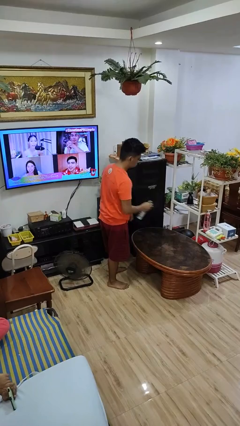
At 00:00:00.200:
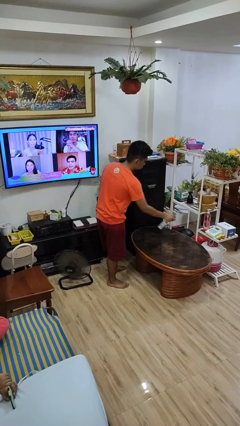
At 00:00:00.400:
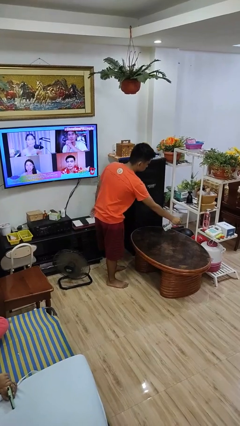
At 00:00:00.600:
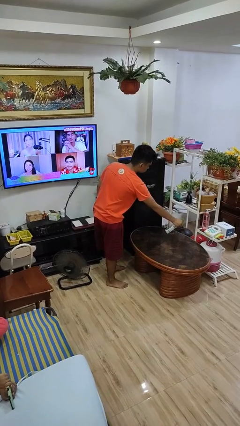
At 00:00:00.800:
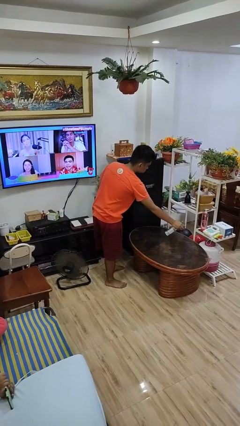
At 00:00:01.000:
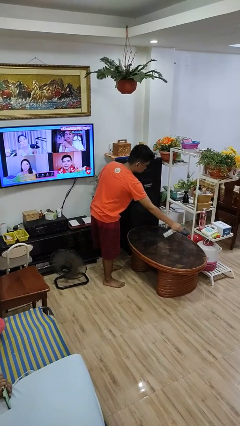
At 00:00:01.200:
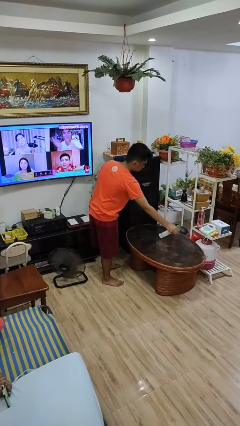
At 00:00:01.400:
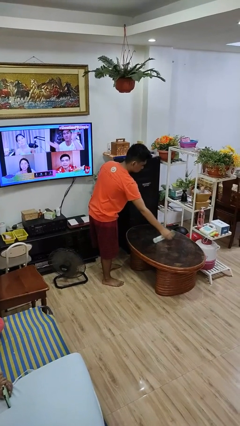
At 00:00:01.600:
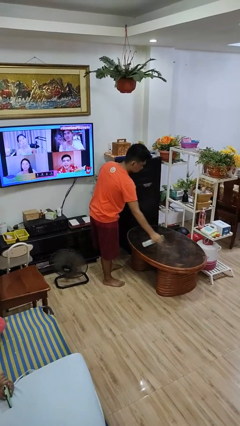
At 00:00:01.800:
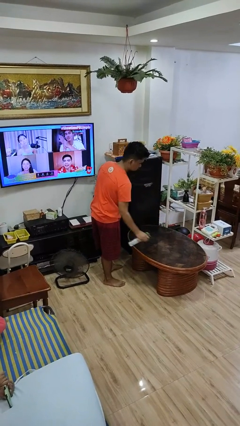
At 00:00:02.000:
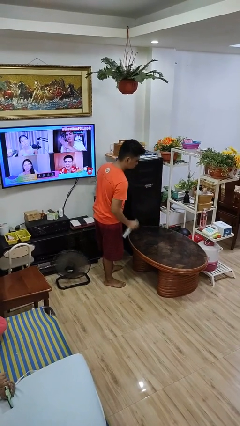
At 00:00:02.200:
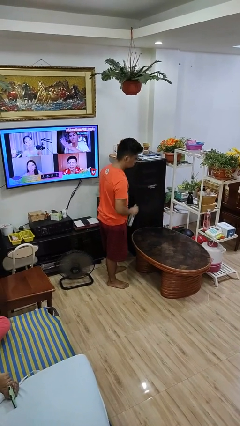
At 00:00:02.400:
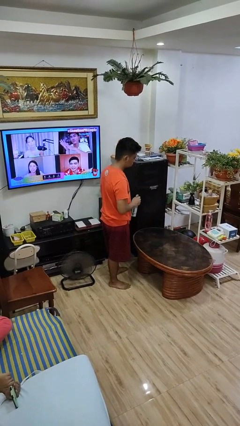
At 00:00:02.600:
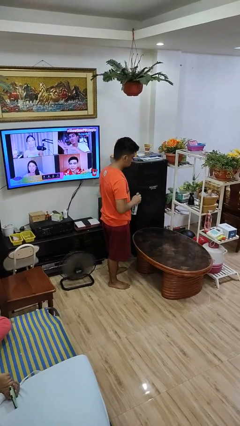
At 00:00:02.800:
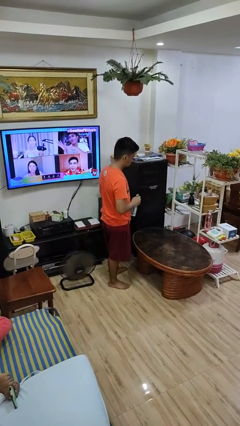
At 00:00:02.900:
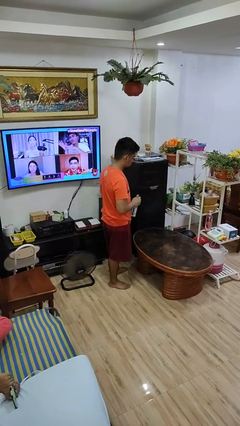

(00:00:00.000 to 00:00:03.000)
person sprays from bottle

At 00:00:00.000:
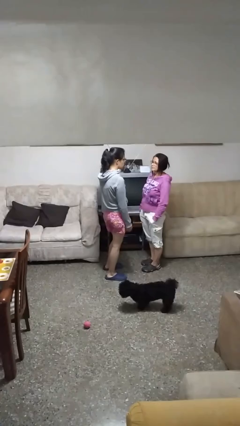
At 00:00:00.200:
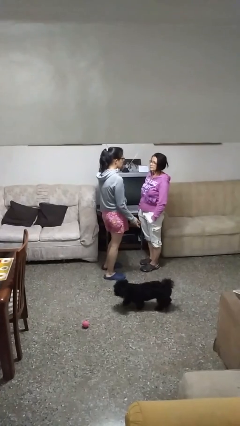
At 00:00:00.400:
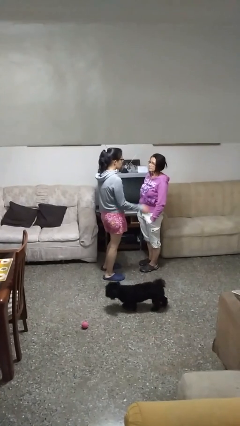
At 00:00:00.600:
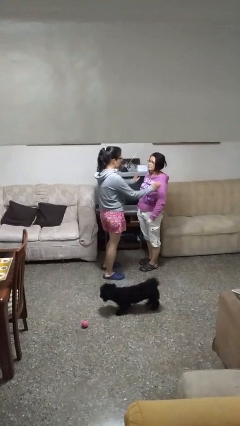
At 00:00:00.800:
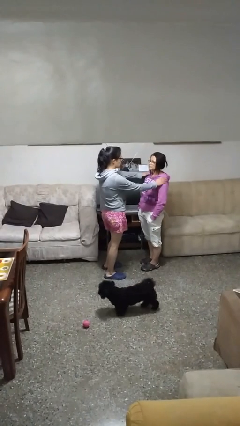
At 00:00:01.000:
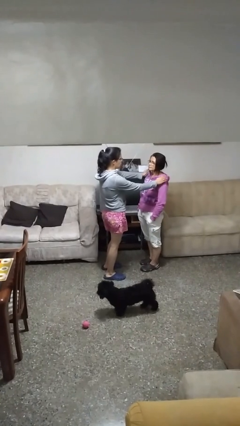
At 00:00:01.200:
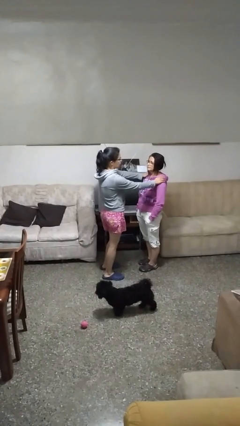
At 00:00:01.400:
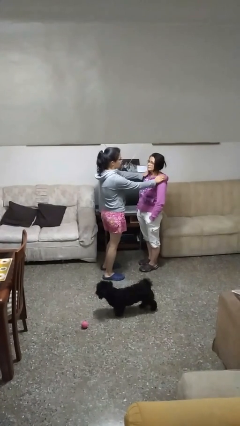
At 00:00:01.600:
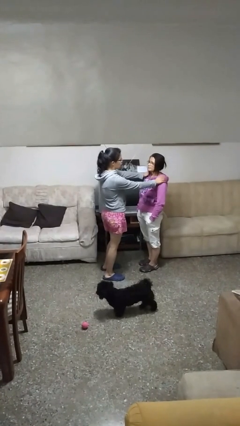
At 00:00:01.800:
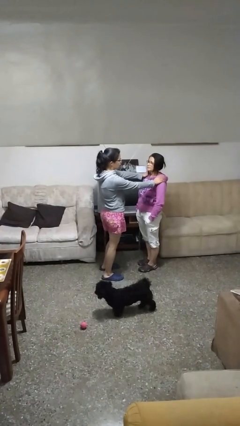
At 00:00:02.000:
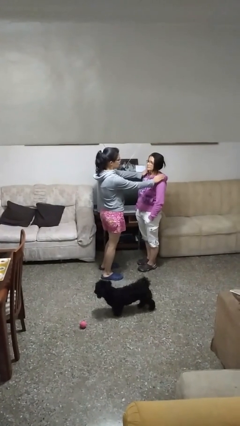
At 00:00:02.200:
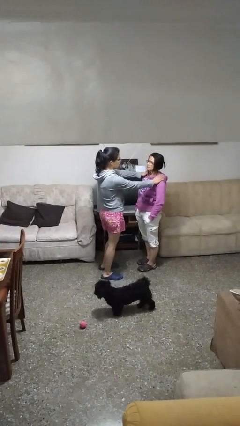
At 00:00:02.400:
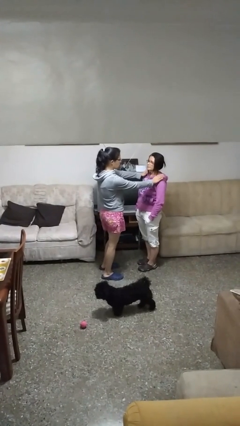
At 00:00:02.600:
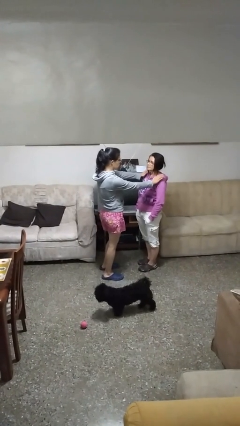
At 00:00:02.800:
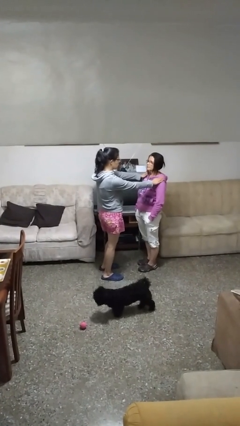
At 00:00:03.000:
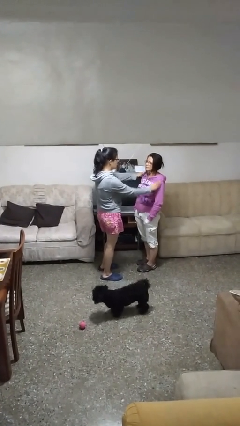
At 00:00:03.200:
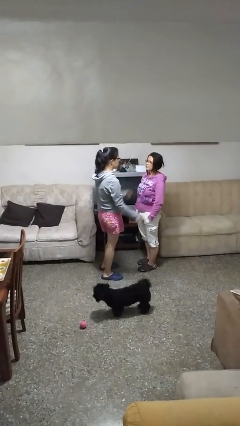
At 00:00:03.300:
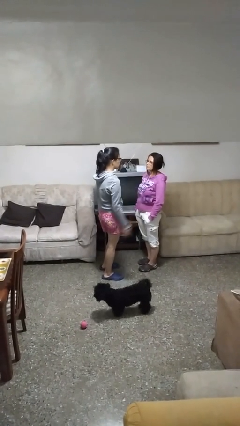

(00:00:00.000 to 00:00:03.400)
person pounds shoulders of person

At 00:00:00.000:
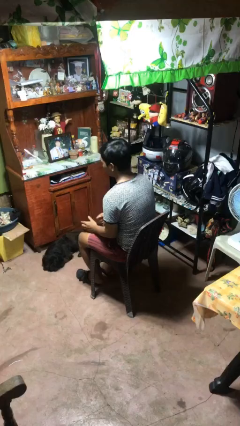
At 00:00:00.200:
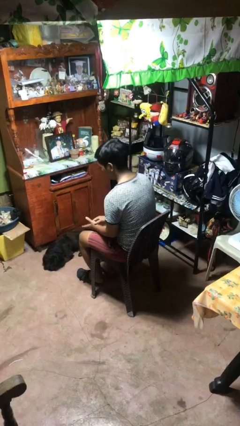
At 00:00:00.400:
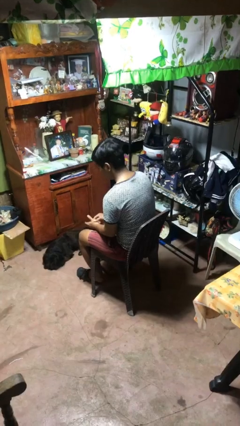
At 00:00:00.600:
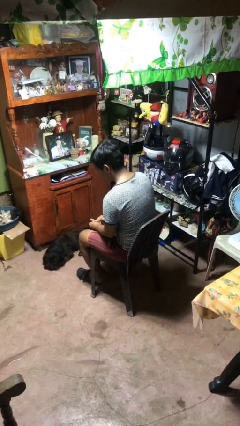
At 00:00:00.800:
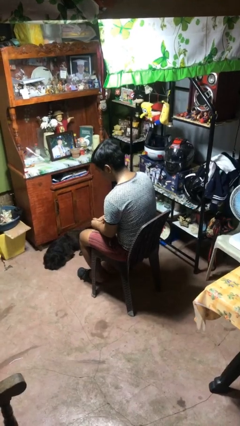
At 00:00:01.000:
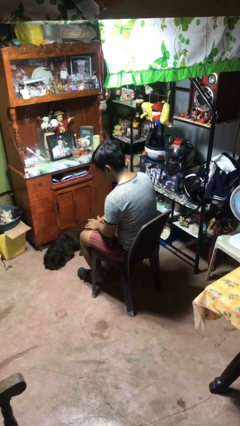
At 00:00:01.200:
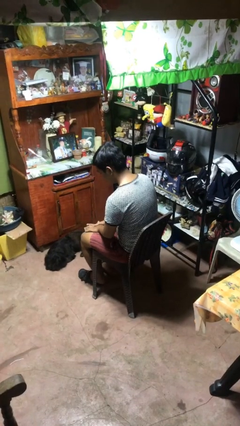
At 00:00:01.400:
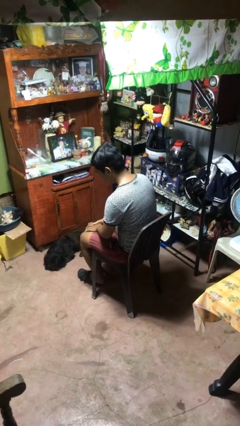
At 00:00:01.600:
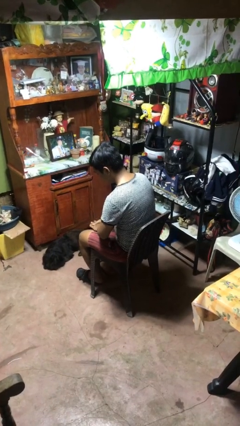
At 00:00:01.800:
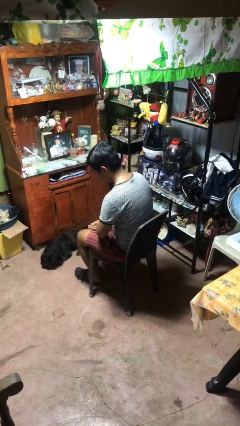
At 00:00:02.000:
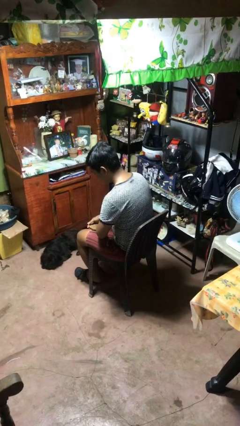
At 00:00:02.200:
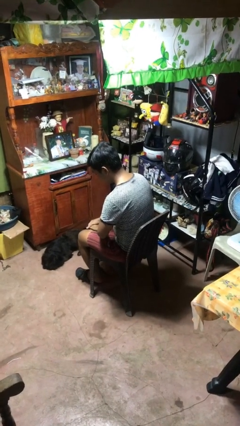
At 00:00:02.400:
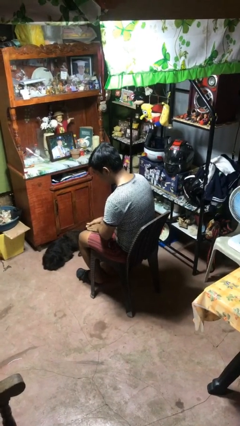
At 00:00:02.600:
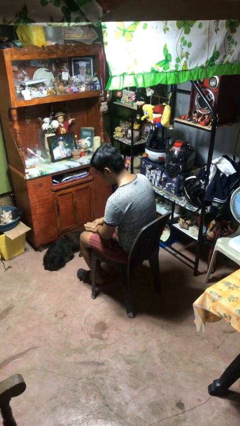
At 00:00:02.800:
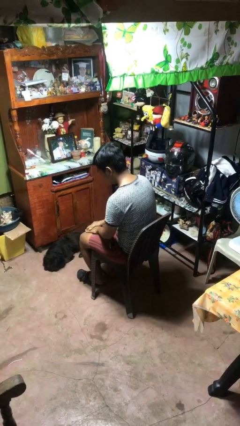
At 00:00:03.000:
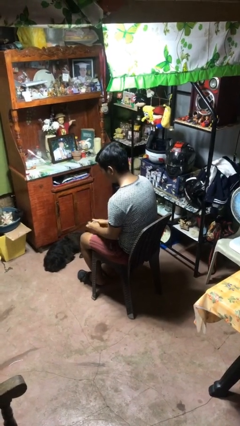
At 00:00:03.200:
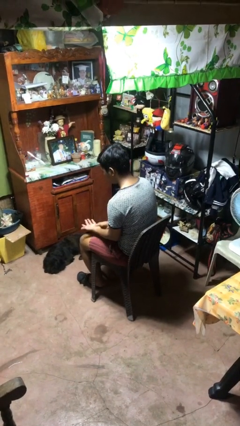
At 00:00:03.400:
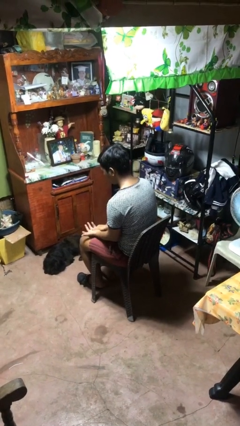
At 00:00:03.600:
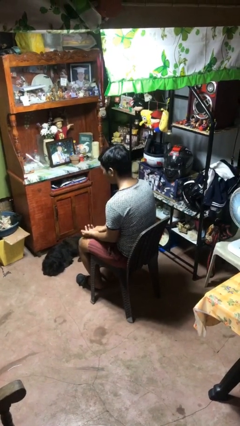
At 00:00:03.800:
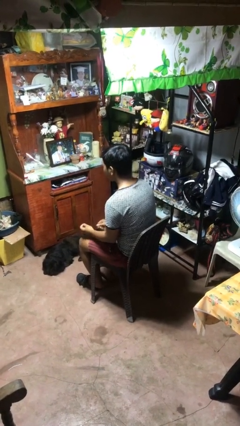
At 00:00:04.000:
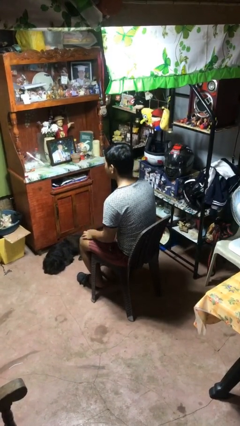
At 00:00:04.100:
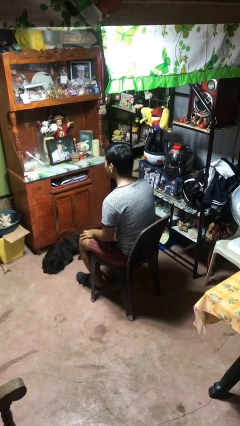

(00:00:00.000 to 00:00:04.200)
person looks at hands in lap

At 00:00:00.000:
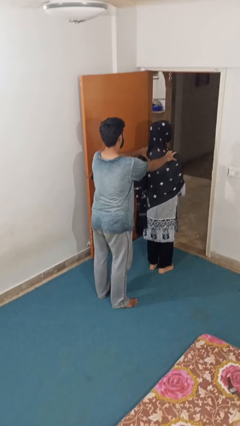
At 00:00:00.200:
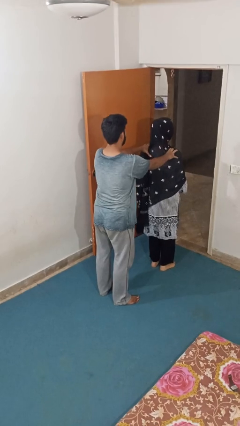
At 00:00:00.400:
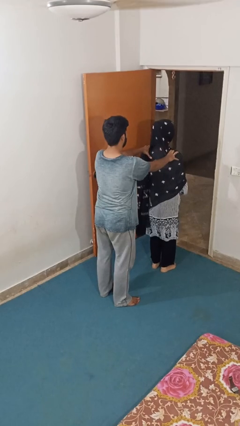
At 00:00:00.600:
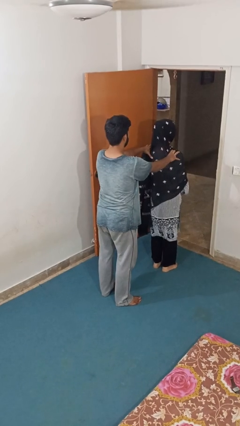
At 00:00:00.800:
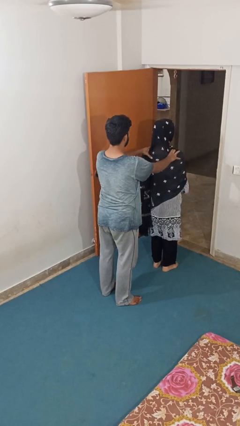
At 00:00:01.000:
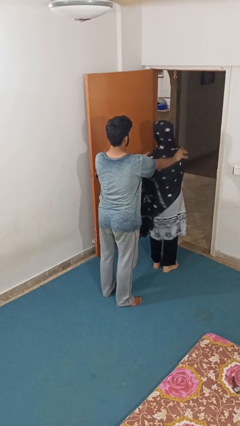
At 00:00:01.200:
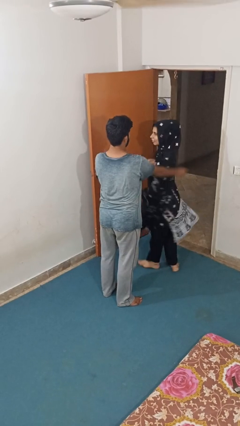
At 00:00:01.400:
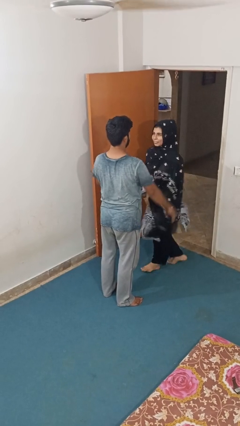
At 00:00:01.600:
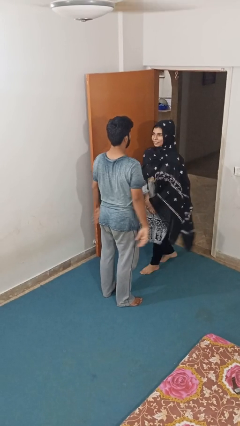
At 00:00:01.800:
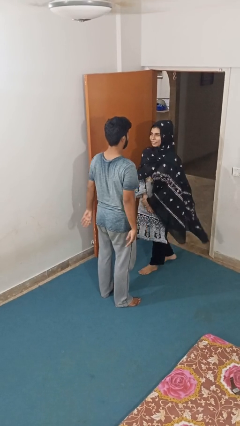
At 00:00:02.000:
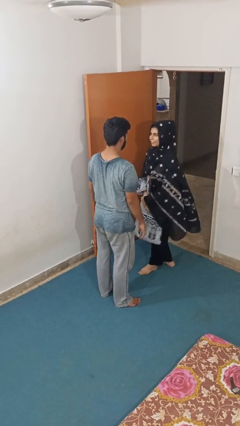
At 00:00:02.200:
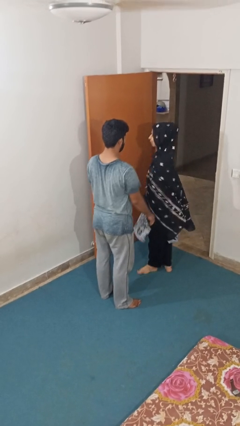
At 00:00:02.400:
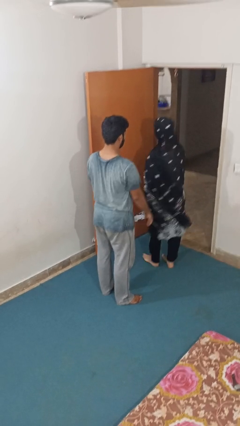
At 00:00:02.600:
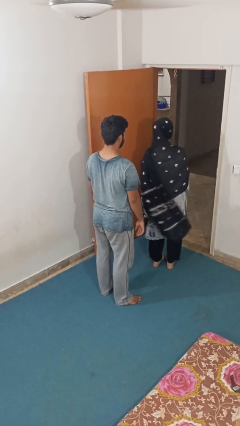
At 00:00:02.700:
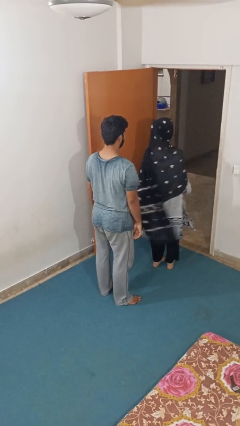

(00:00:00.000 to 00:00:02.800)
person spins person around

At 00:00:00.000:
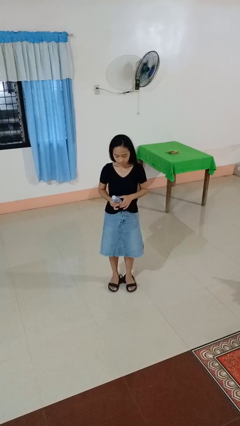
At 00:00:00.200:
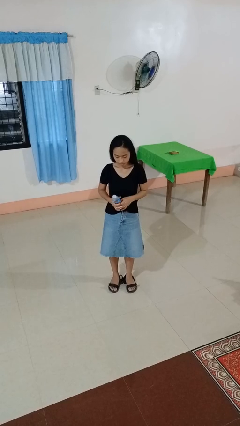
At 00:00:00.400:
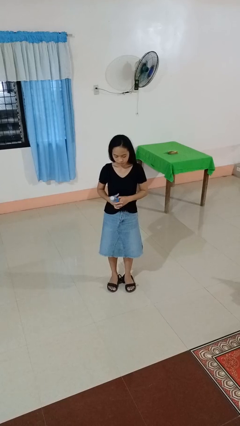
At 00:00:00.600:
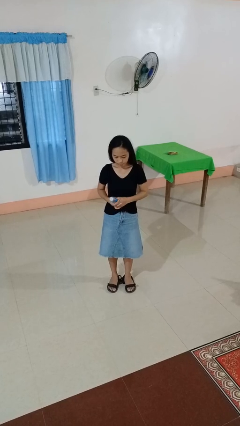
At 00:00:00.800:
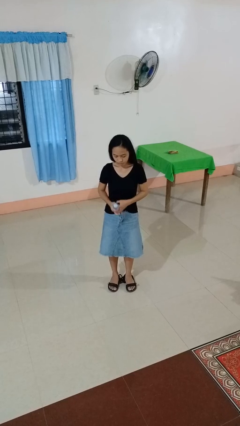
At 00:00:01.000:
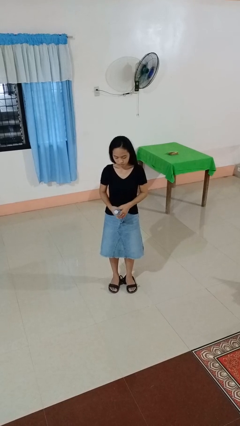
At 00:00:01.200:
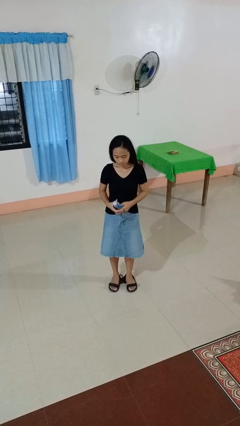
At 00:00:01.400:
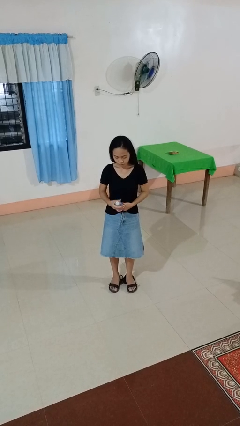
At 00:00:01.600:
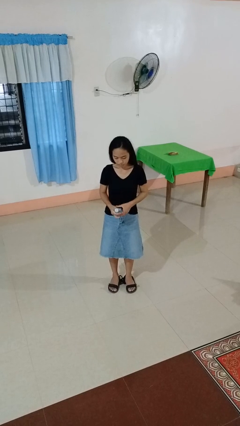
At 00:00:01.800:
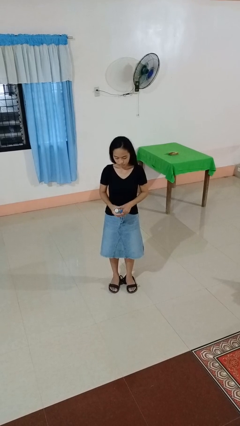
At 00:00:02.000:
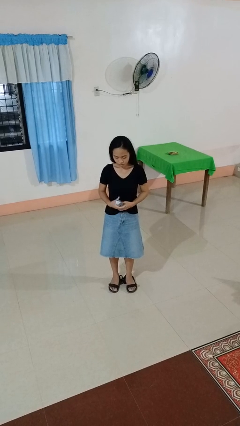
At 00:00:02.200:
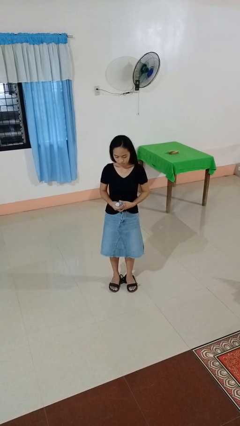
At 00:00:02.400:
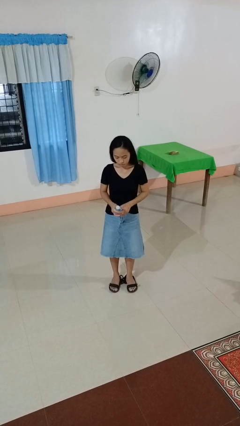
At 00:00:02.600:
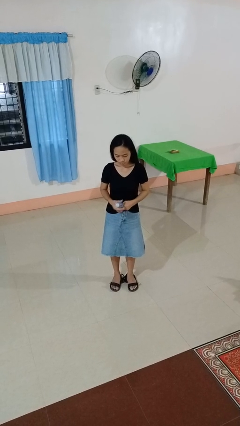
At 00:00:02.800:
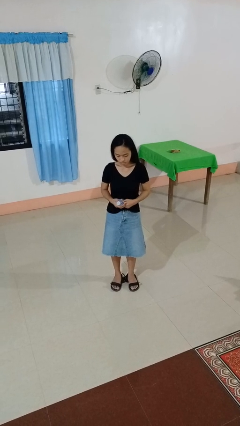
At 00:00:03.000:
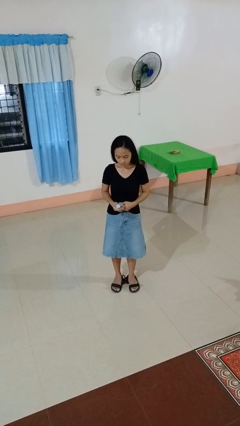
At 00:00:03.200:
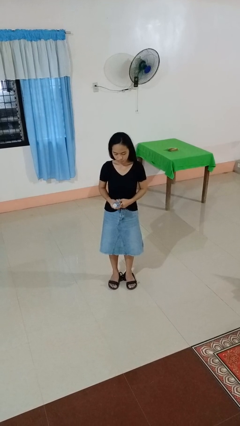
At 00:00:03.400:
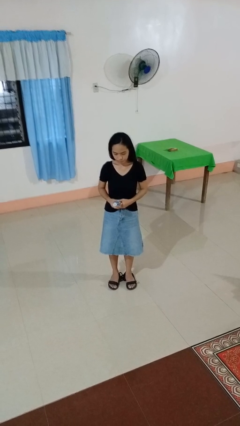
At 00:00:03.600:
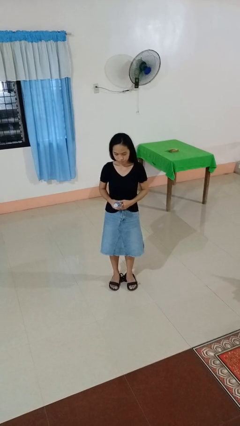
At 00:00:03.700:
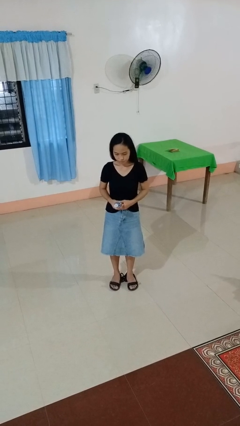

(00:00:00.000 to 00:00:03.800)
person squeezes object

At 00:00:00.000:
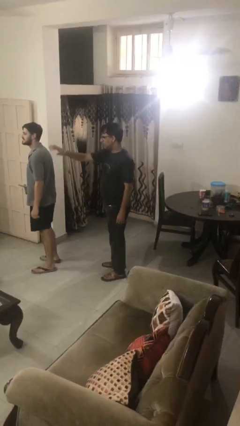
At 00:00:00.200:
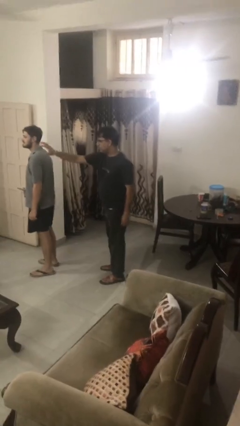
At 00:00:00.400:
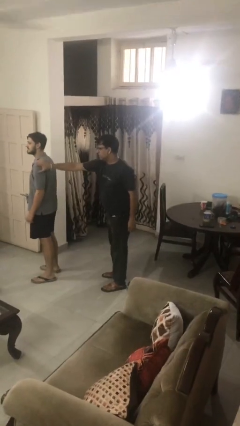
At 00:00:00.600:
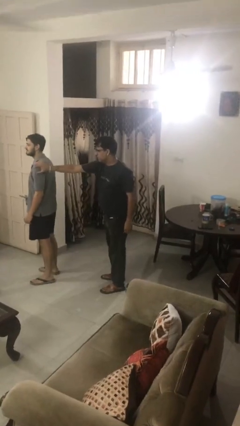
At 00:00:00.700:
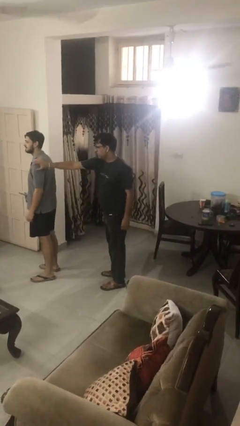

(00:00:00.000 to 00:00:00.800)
person grabs person by shoulder
